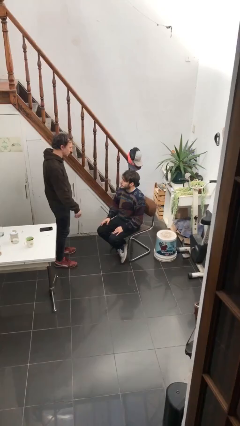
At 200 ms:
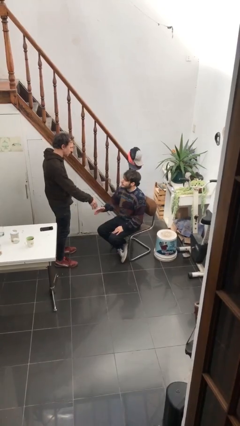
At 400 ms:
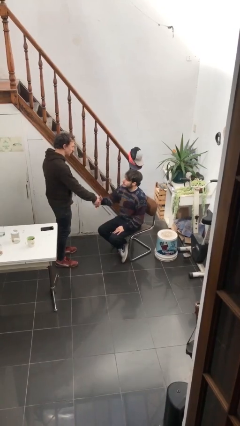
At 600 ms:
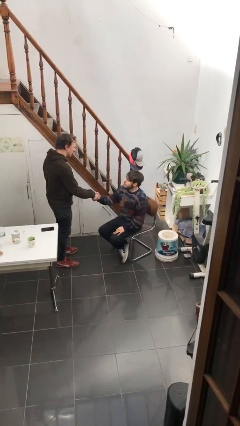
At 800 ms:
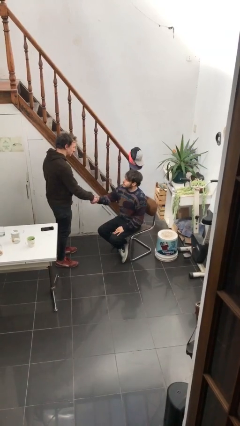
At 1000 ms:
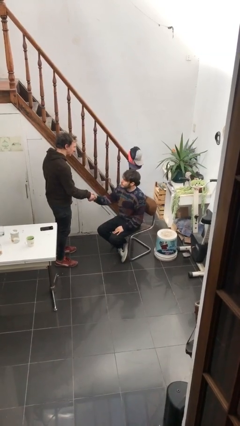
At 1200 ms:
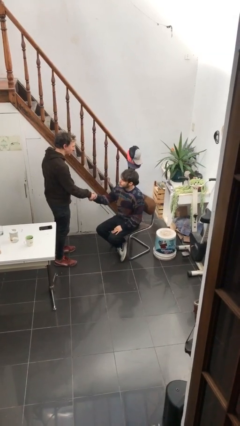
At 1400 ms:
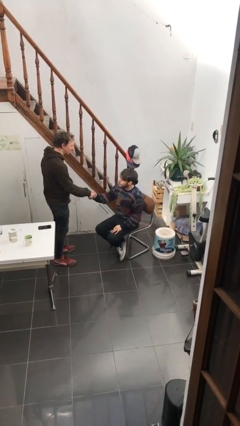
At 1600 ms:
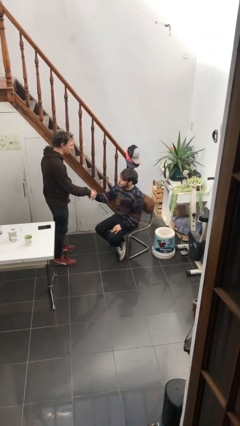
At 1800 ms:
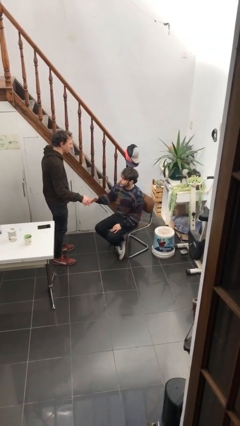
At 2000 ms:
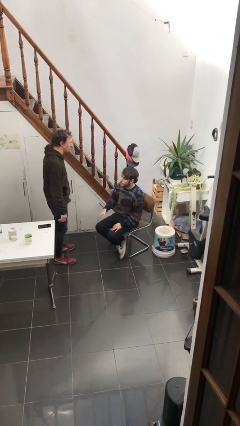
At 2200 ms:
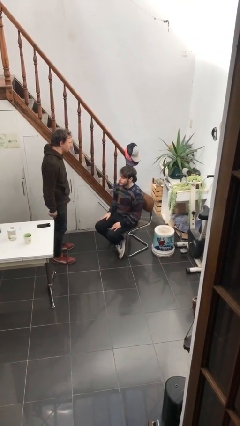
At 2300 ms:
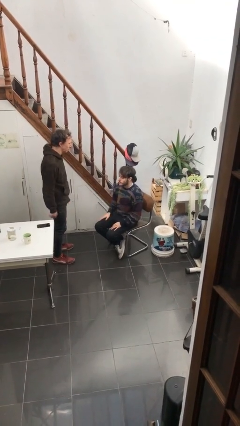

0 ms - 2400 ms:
person shakes hand

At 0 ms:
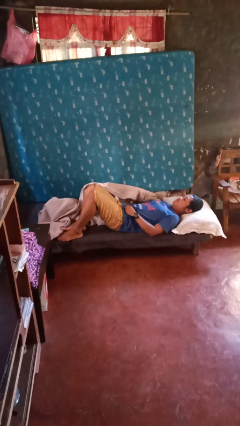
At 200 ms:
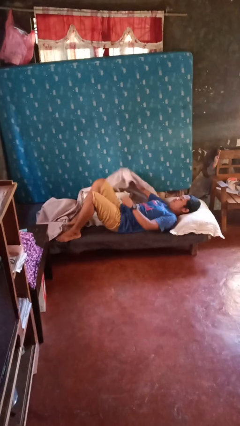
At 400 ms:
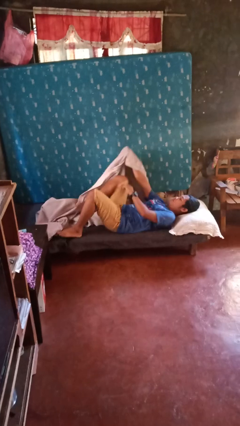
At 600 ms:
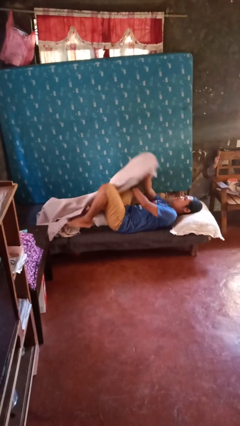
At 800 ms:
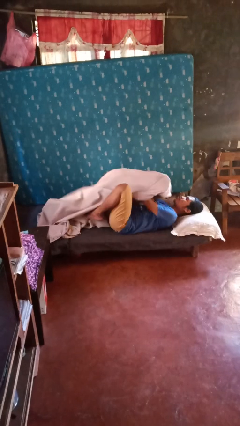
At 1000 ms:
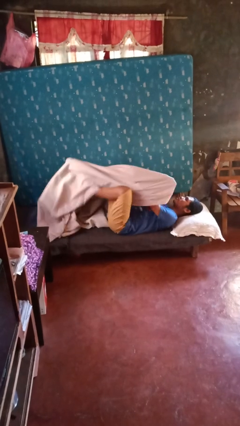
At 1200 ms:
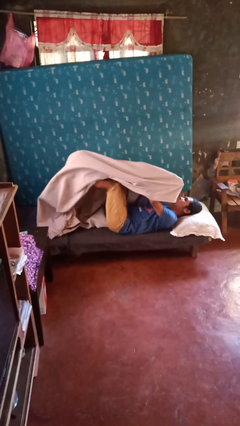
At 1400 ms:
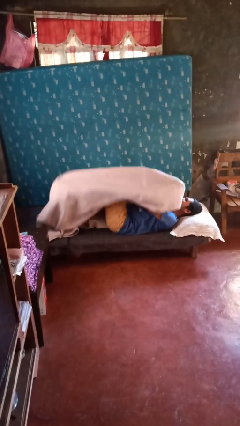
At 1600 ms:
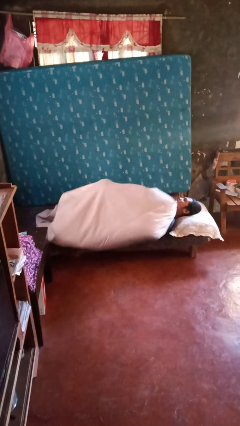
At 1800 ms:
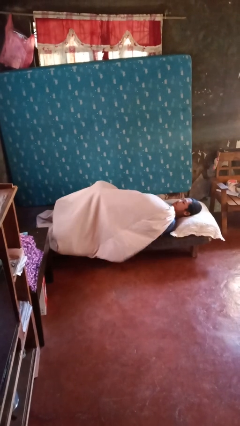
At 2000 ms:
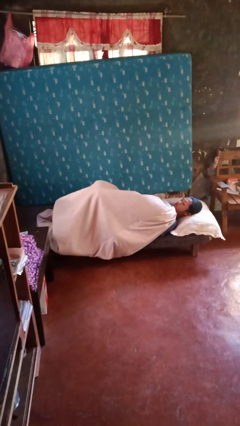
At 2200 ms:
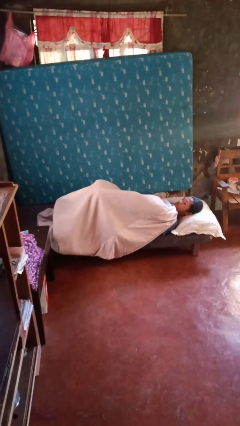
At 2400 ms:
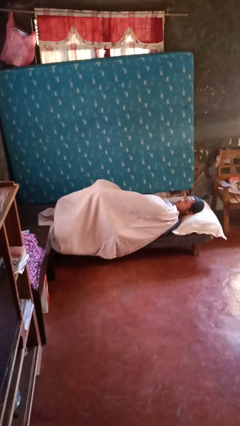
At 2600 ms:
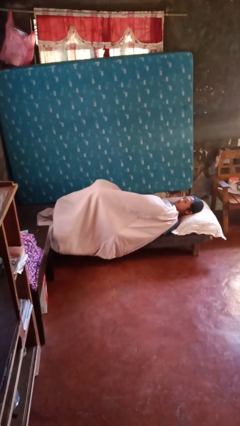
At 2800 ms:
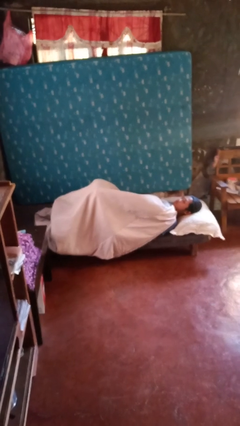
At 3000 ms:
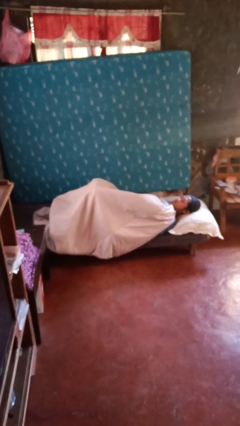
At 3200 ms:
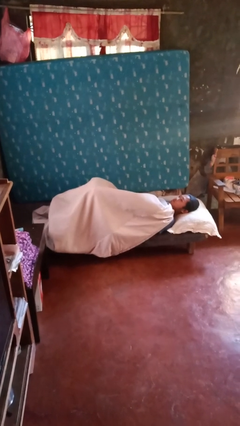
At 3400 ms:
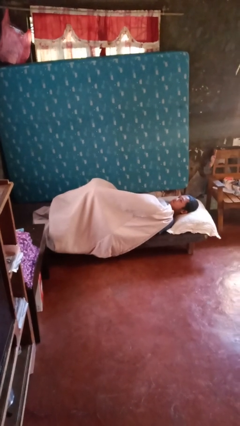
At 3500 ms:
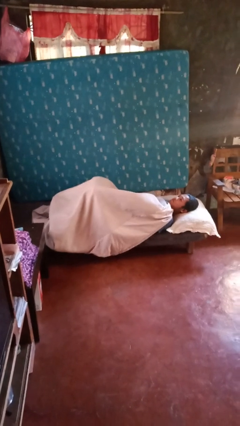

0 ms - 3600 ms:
person covers with bedsheets

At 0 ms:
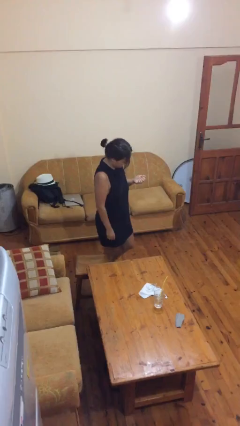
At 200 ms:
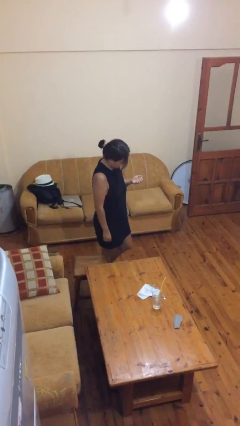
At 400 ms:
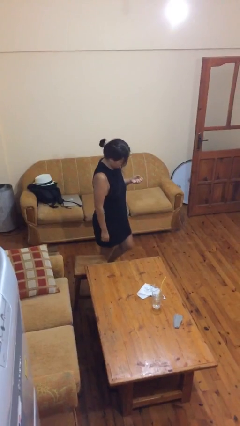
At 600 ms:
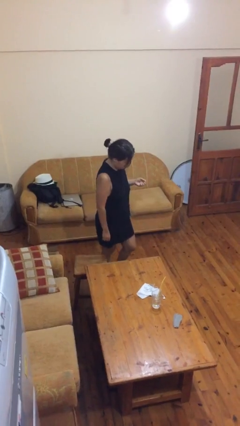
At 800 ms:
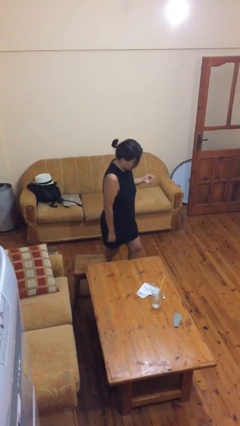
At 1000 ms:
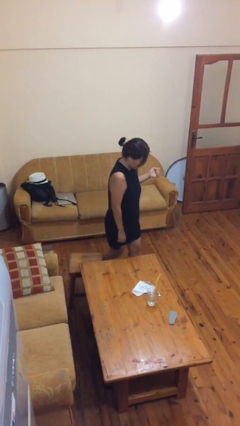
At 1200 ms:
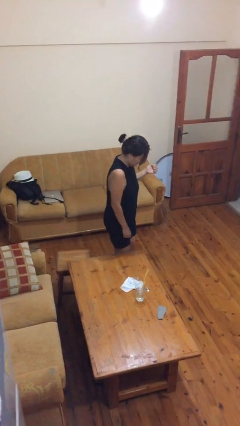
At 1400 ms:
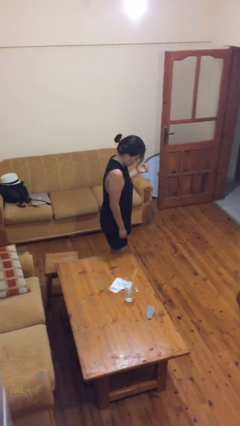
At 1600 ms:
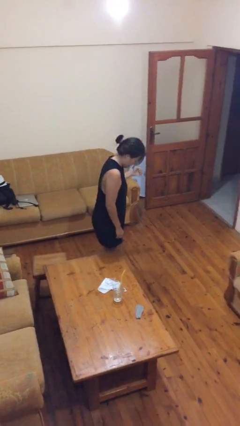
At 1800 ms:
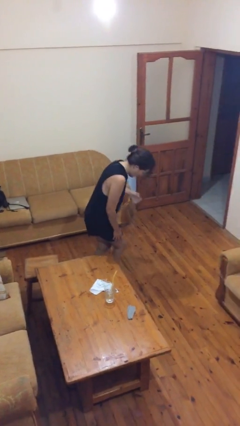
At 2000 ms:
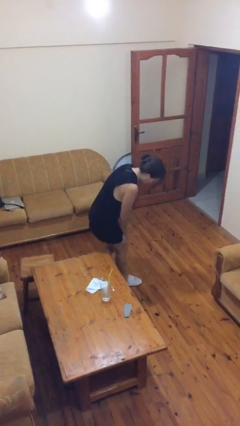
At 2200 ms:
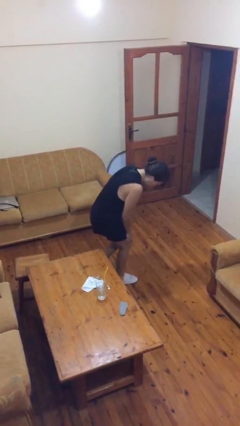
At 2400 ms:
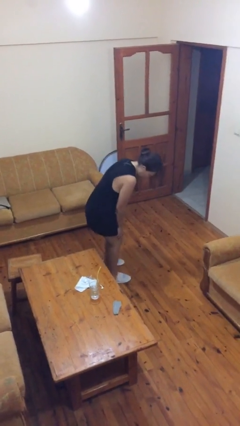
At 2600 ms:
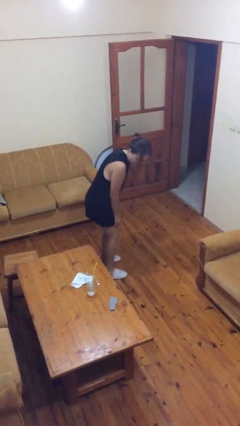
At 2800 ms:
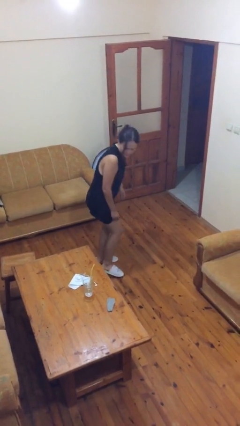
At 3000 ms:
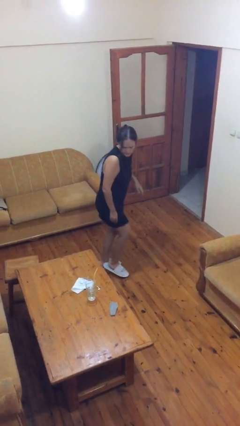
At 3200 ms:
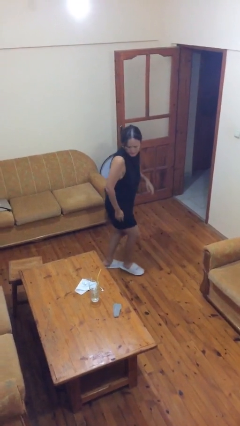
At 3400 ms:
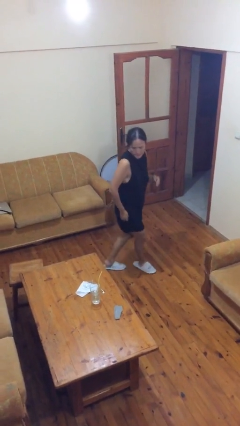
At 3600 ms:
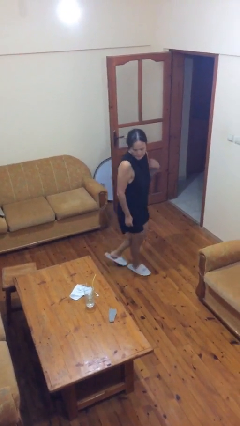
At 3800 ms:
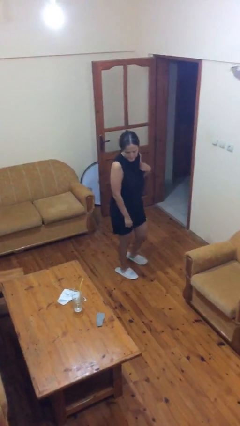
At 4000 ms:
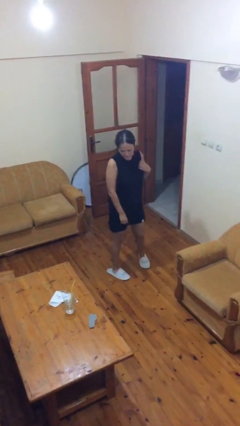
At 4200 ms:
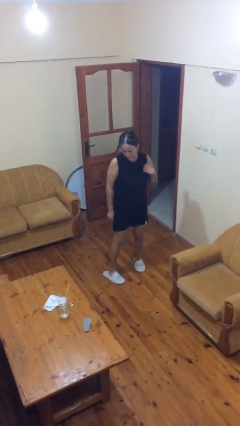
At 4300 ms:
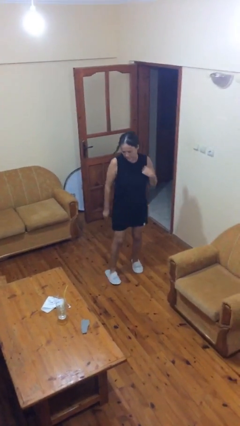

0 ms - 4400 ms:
person bumps into table

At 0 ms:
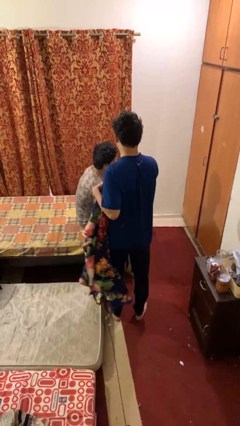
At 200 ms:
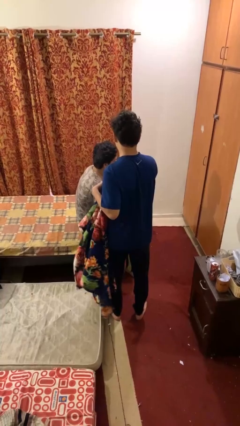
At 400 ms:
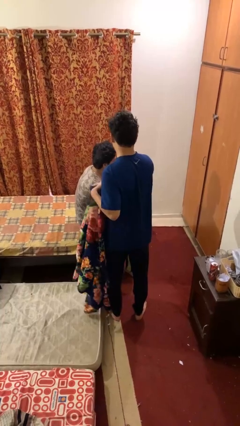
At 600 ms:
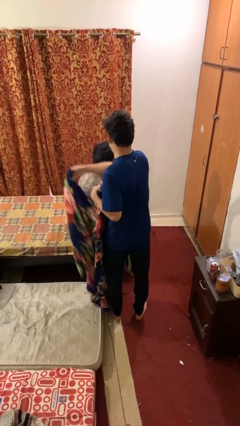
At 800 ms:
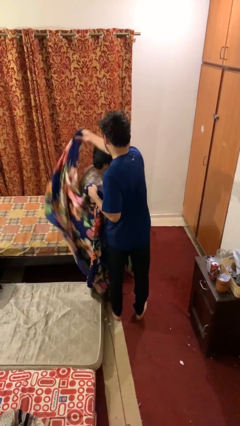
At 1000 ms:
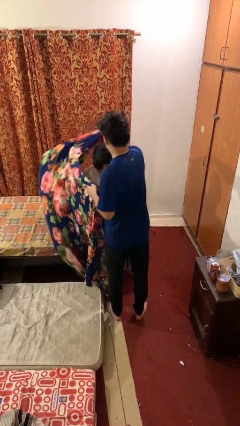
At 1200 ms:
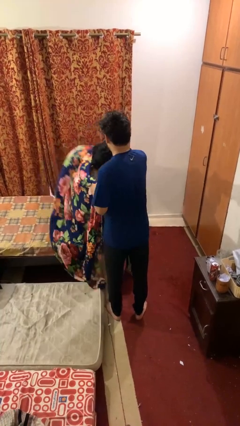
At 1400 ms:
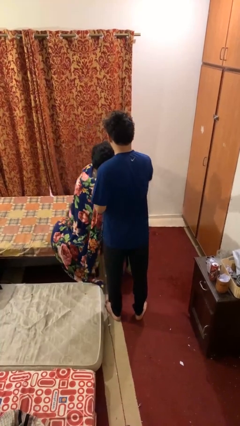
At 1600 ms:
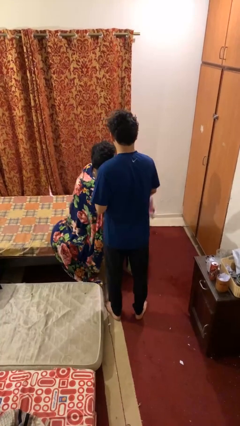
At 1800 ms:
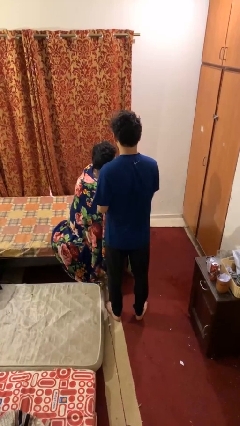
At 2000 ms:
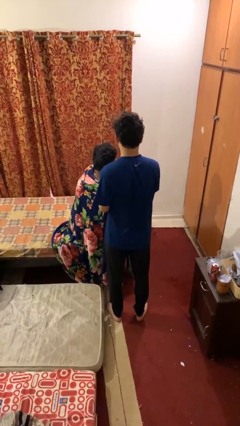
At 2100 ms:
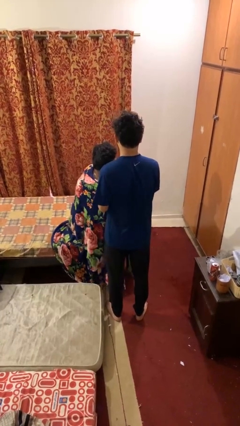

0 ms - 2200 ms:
person covers friend with blanket

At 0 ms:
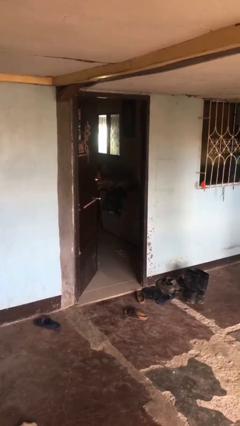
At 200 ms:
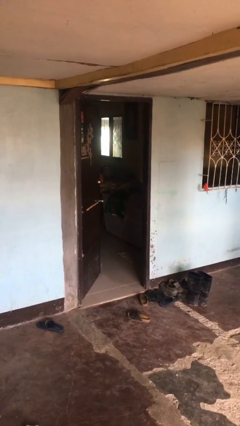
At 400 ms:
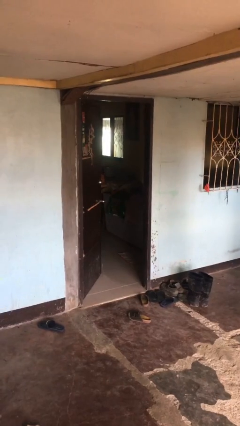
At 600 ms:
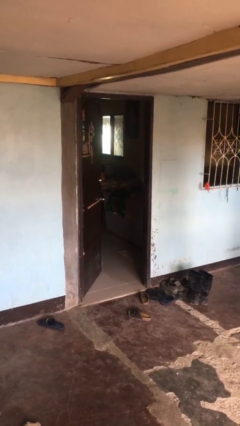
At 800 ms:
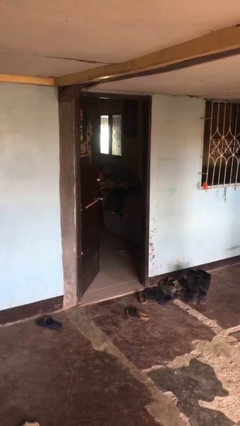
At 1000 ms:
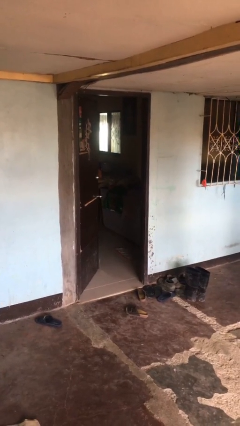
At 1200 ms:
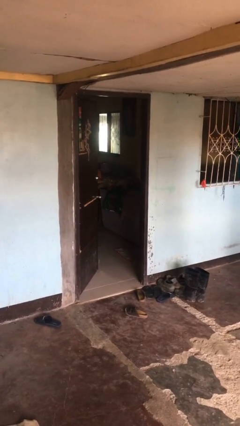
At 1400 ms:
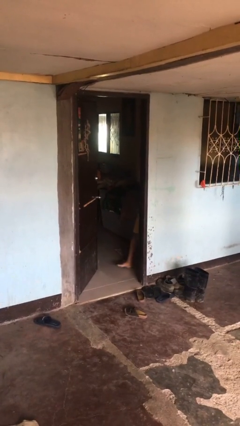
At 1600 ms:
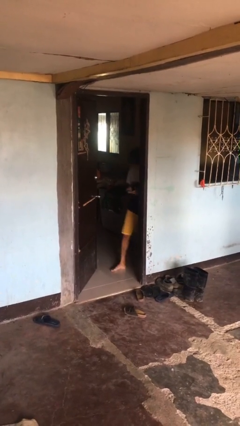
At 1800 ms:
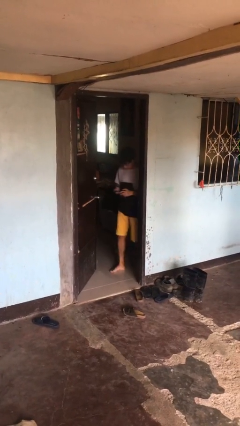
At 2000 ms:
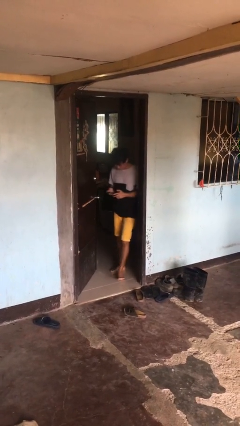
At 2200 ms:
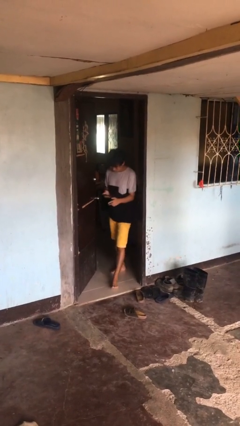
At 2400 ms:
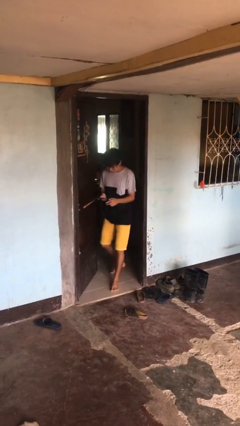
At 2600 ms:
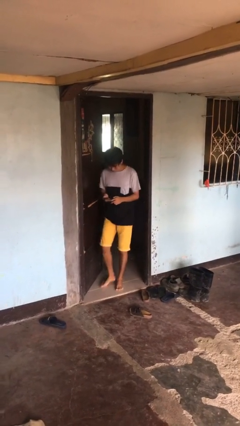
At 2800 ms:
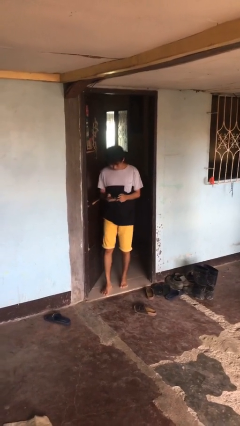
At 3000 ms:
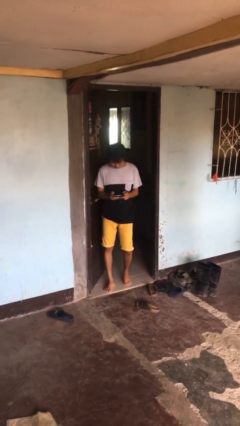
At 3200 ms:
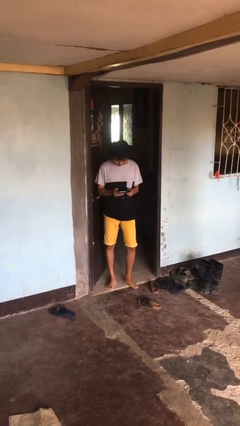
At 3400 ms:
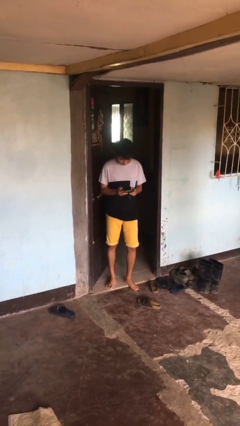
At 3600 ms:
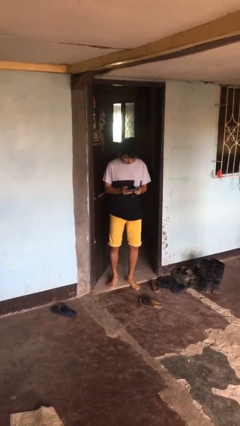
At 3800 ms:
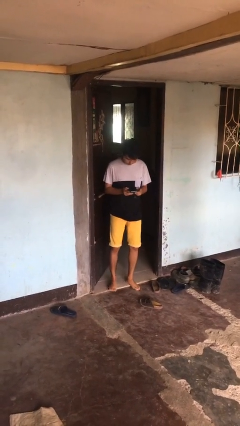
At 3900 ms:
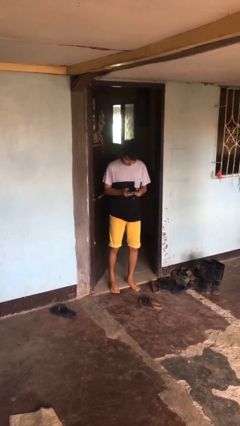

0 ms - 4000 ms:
person enters scene through structure

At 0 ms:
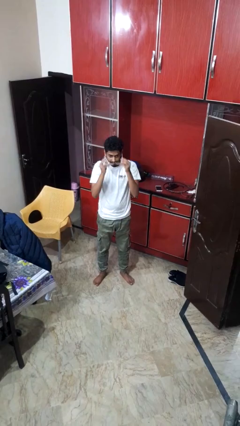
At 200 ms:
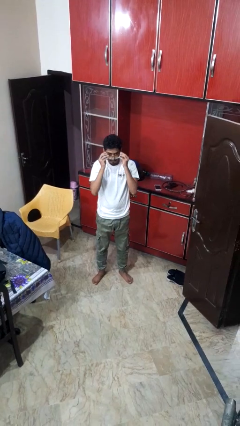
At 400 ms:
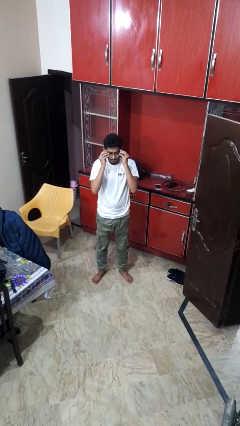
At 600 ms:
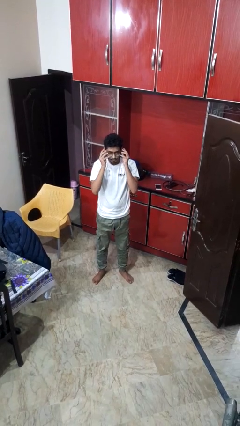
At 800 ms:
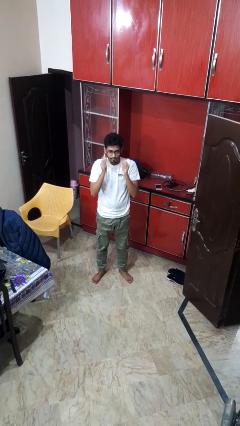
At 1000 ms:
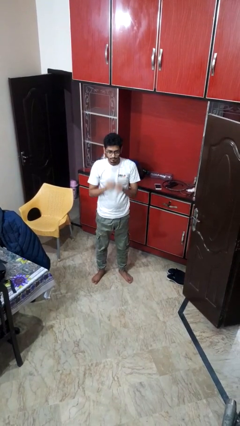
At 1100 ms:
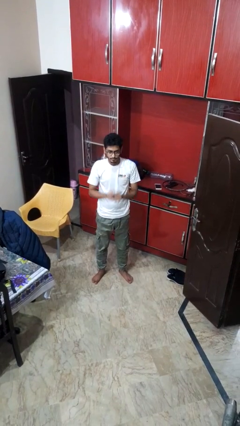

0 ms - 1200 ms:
person puts on glasses
